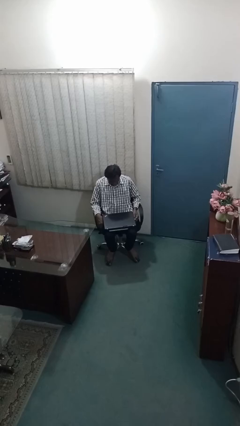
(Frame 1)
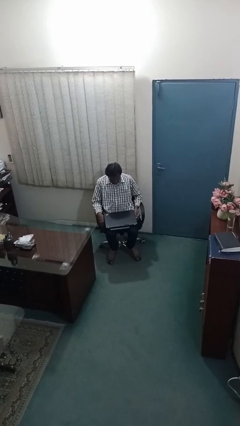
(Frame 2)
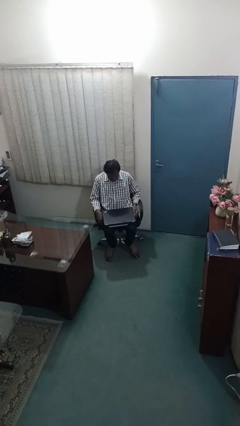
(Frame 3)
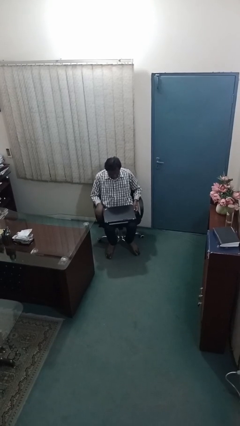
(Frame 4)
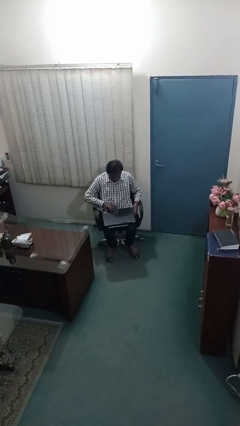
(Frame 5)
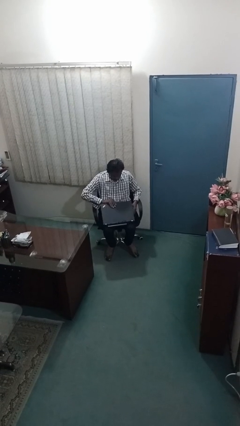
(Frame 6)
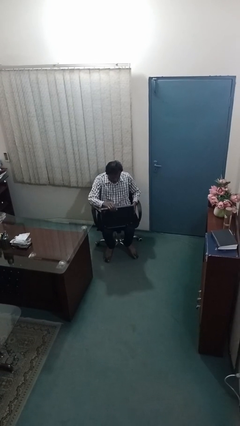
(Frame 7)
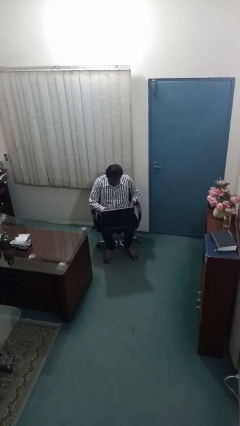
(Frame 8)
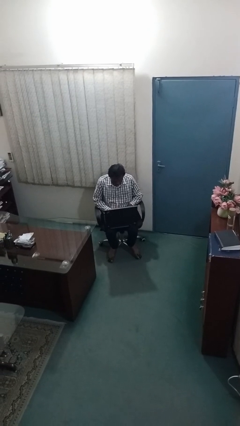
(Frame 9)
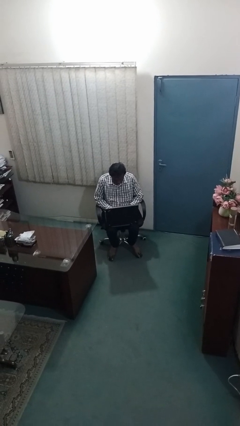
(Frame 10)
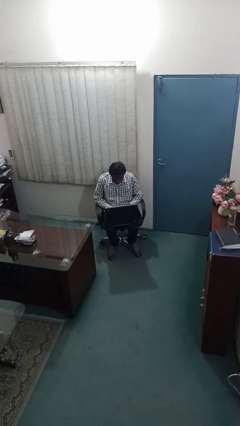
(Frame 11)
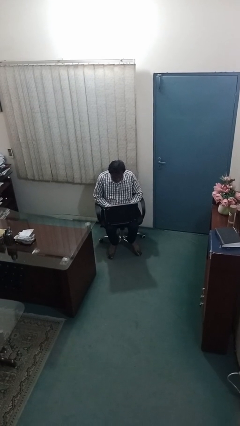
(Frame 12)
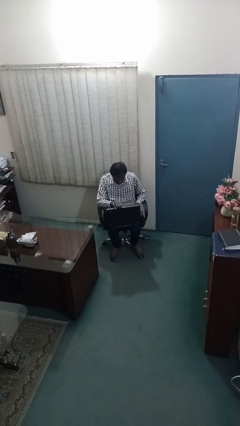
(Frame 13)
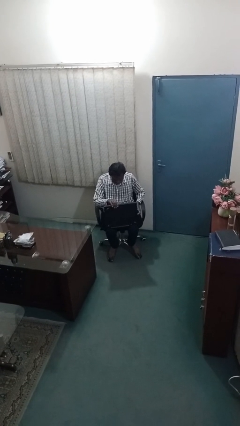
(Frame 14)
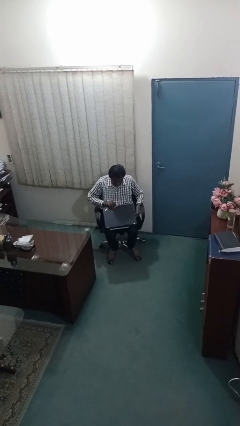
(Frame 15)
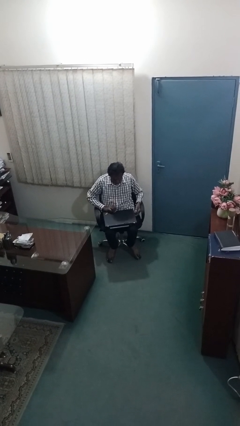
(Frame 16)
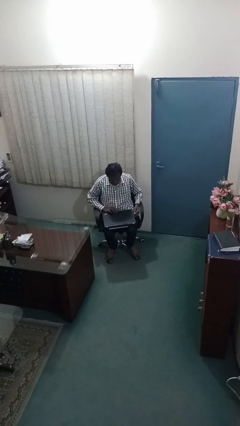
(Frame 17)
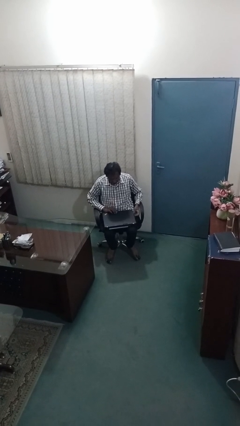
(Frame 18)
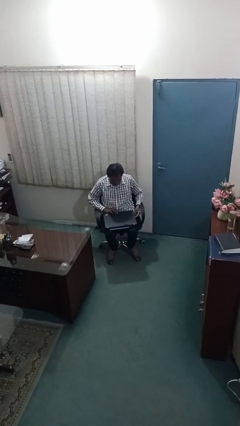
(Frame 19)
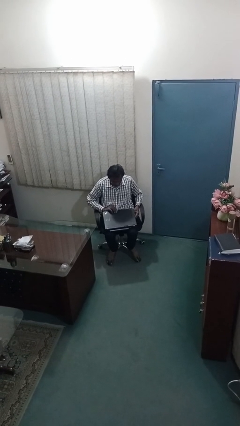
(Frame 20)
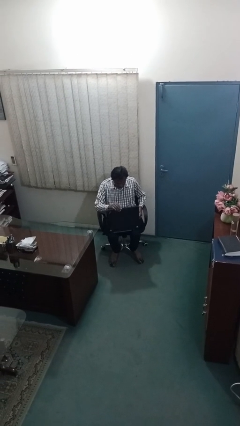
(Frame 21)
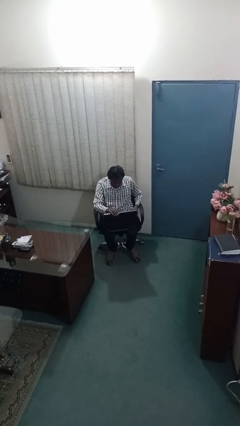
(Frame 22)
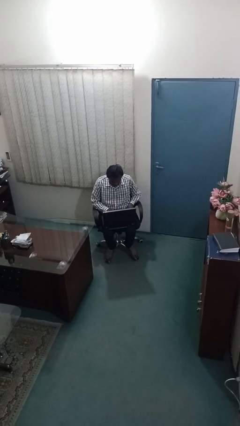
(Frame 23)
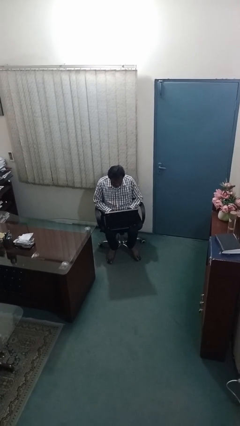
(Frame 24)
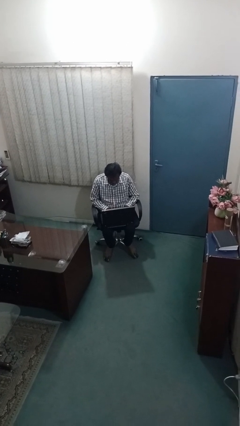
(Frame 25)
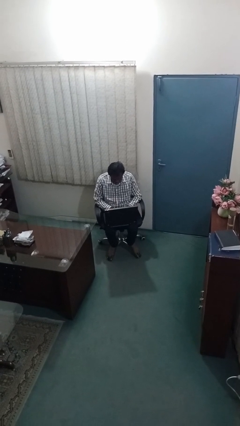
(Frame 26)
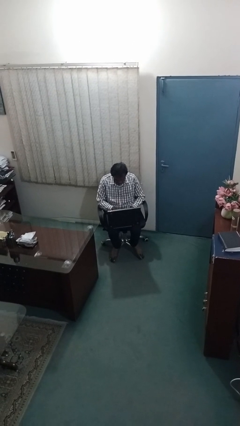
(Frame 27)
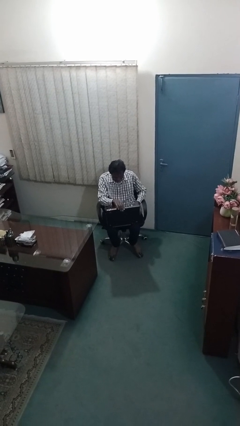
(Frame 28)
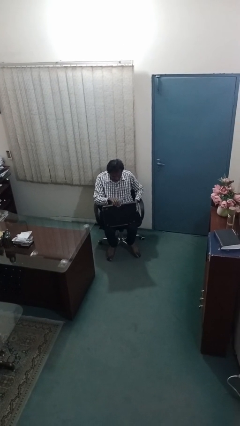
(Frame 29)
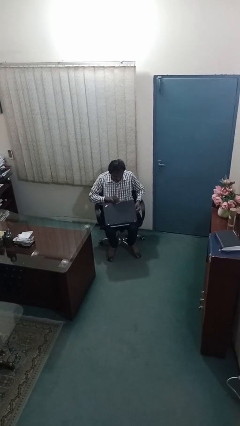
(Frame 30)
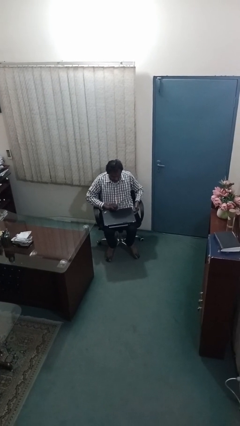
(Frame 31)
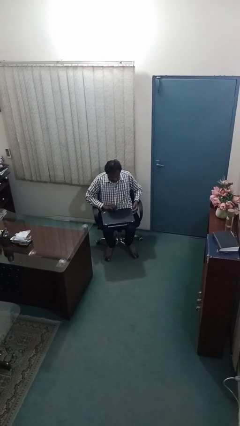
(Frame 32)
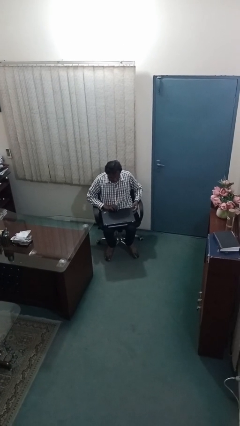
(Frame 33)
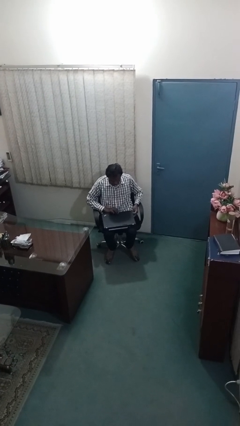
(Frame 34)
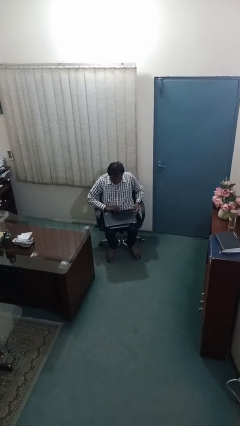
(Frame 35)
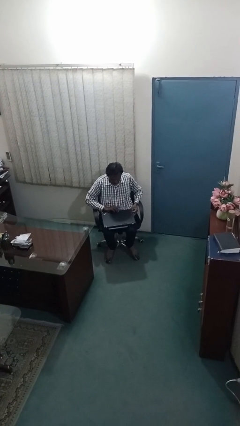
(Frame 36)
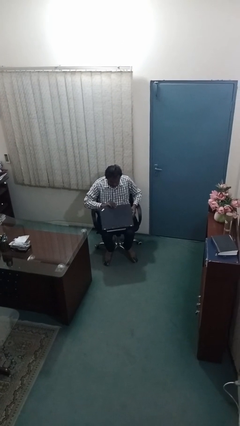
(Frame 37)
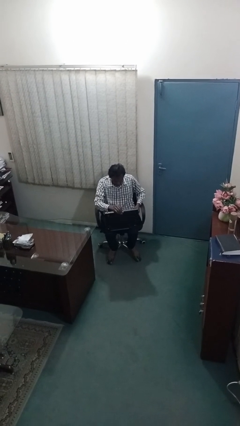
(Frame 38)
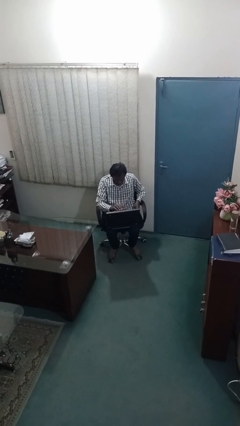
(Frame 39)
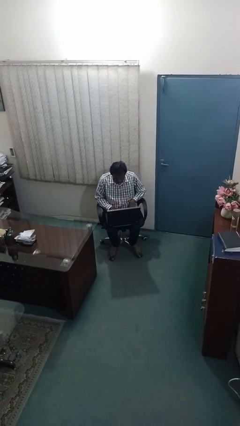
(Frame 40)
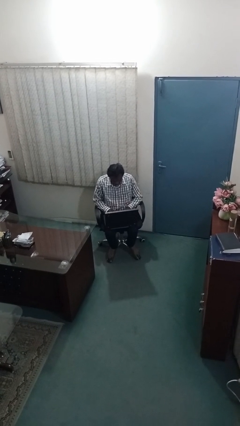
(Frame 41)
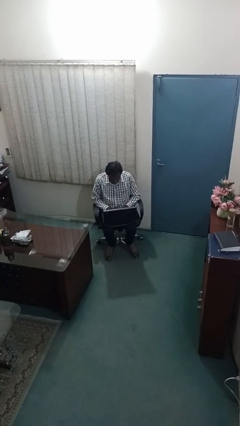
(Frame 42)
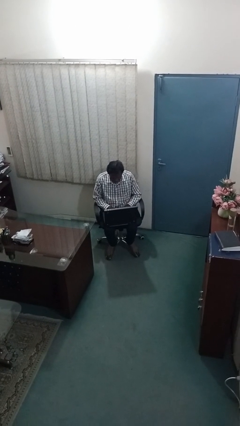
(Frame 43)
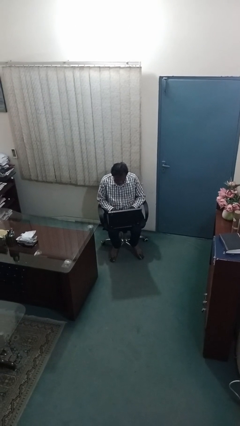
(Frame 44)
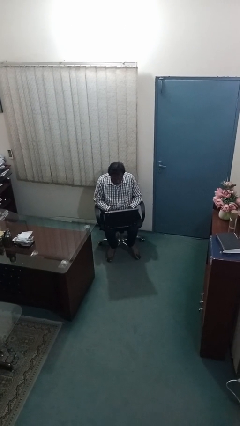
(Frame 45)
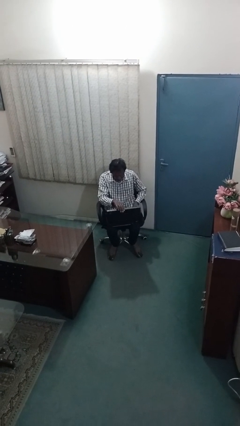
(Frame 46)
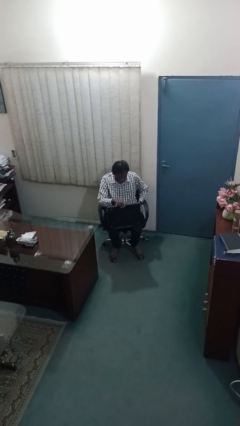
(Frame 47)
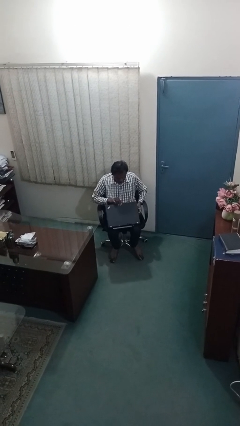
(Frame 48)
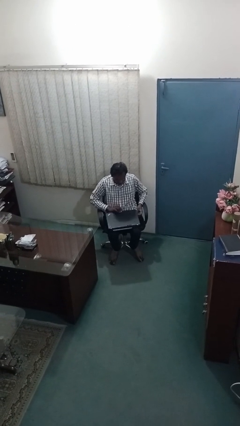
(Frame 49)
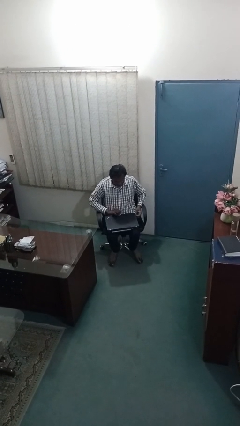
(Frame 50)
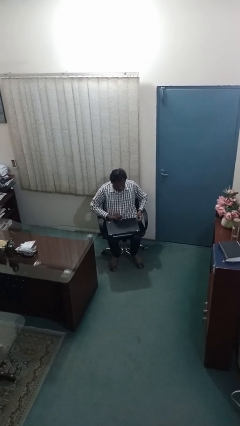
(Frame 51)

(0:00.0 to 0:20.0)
person interacts with laptop

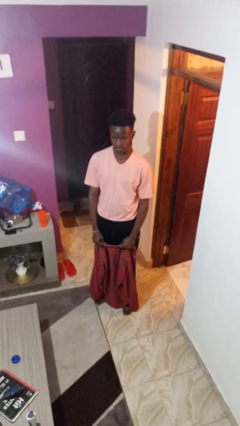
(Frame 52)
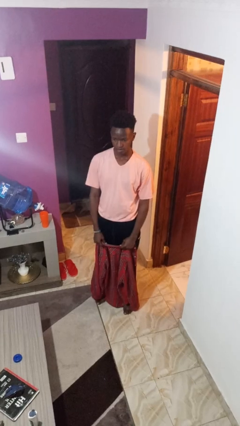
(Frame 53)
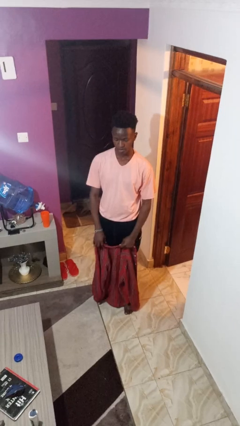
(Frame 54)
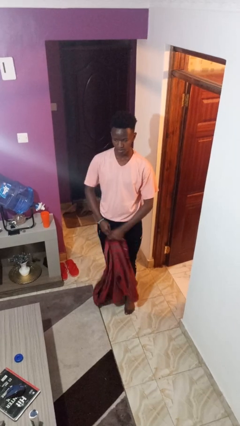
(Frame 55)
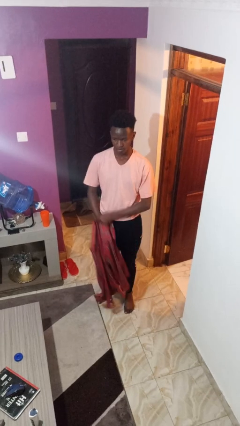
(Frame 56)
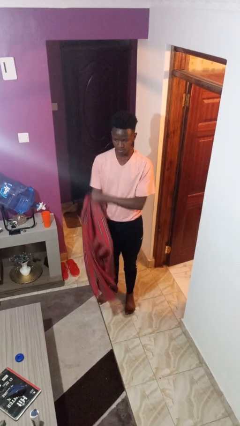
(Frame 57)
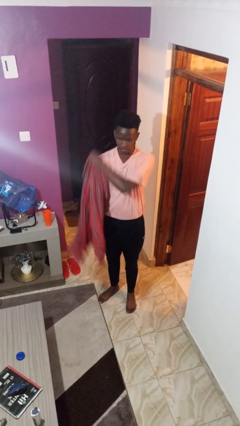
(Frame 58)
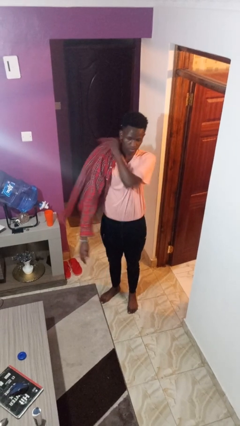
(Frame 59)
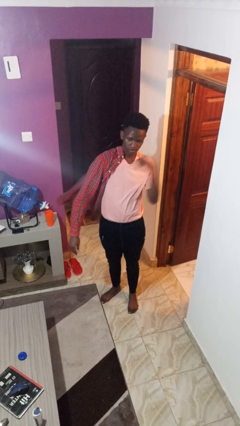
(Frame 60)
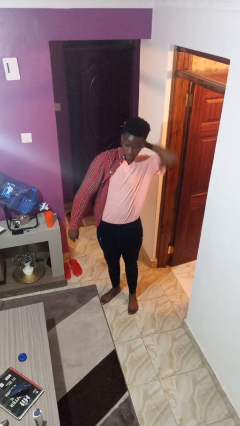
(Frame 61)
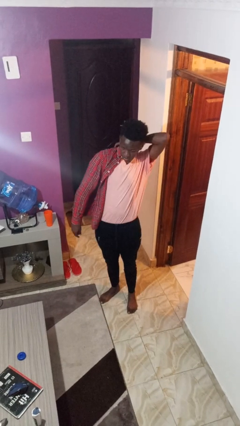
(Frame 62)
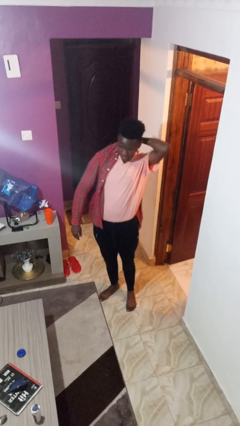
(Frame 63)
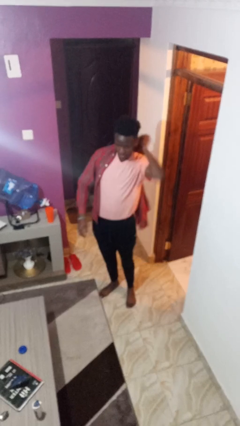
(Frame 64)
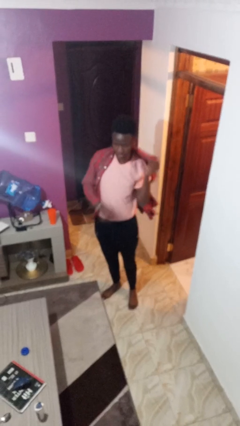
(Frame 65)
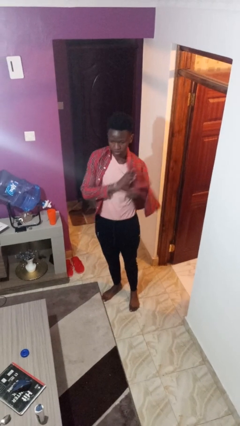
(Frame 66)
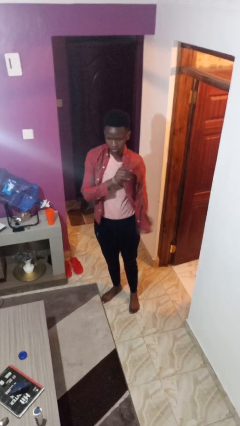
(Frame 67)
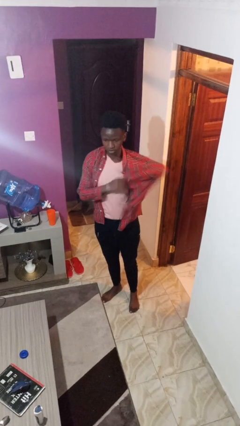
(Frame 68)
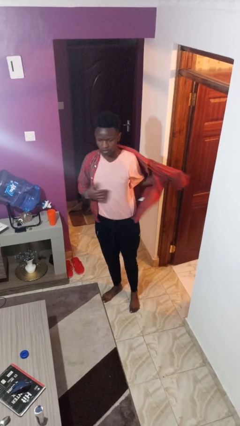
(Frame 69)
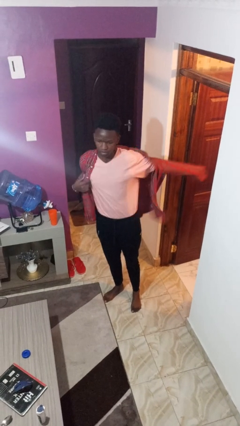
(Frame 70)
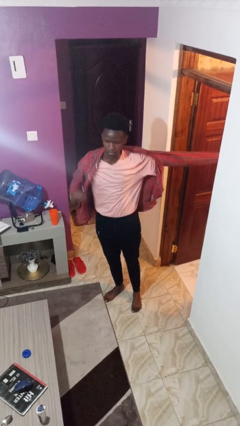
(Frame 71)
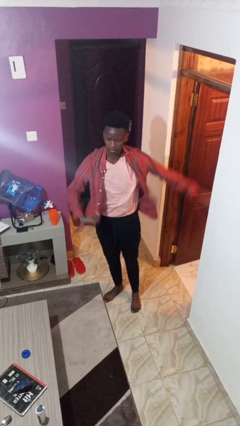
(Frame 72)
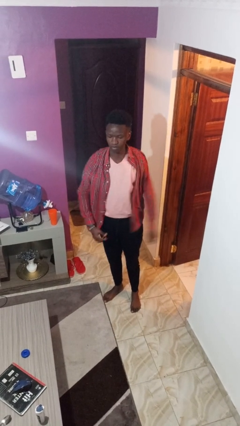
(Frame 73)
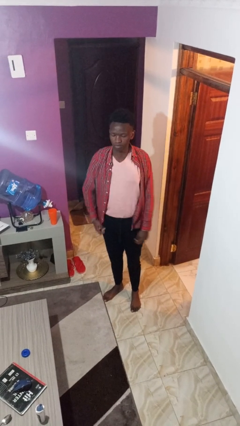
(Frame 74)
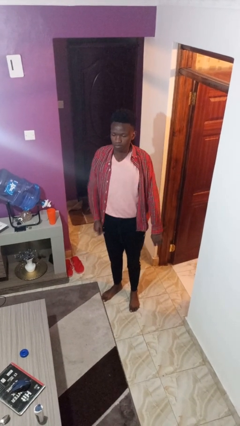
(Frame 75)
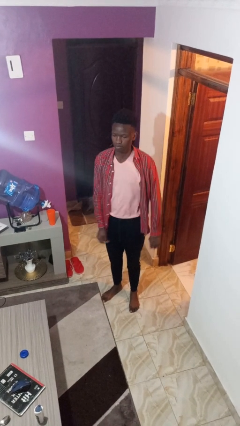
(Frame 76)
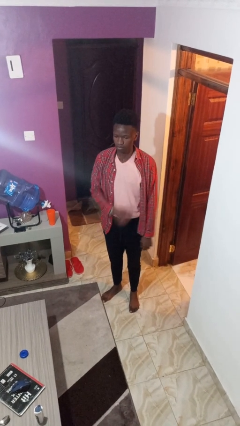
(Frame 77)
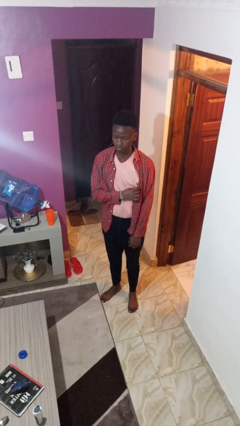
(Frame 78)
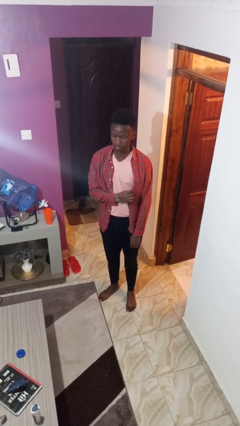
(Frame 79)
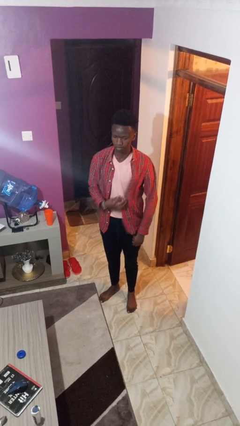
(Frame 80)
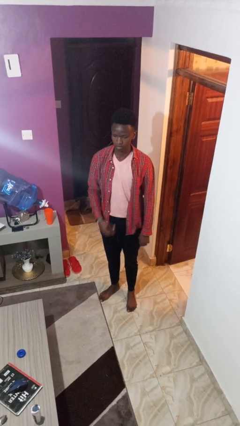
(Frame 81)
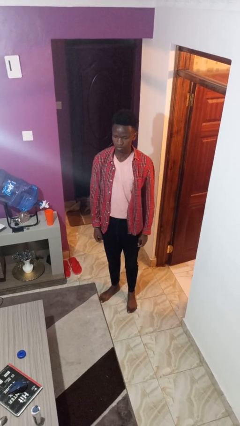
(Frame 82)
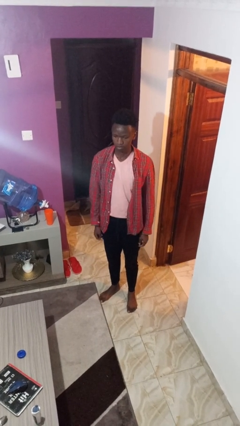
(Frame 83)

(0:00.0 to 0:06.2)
person puts on shirt

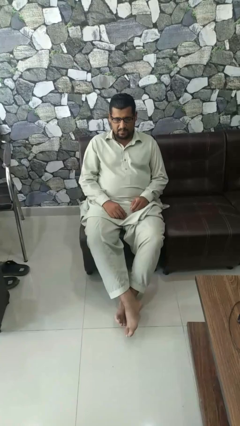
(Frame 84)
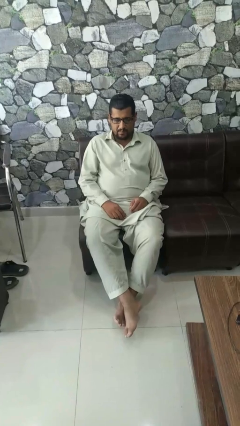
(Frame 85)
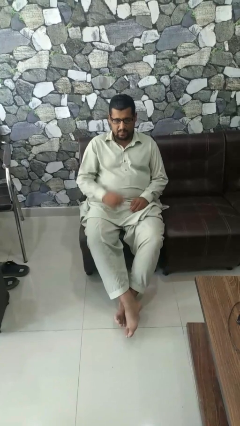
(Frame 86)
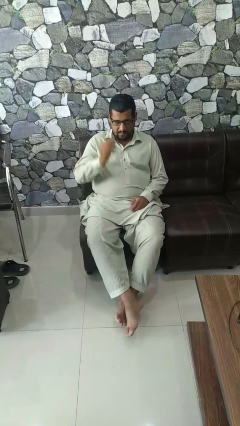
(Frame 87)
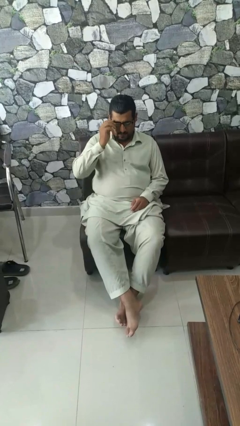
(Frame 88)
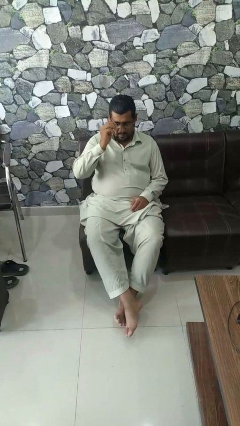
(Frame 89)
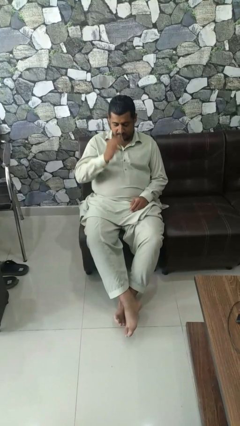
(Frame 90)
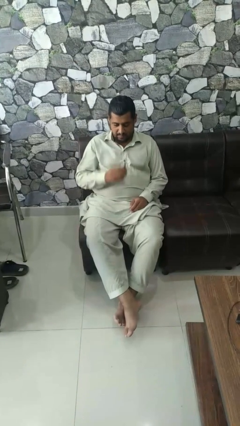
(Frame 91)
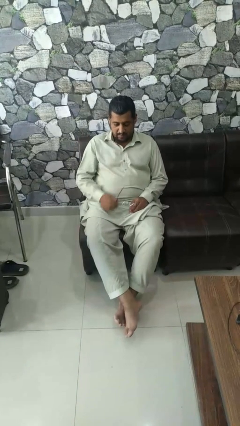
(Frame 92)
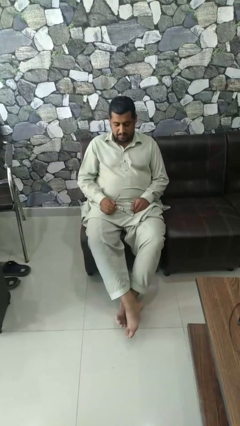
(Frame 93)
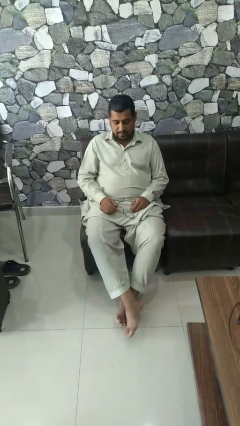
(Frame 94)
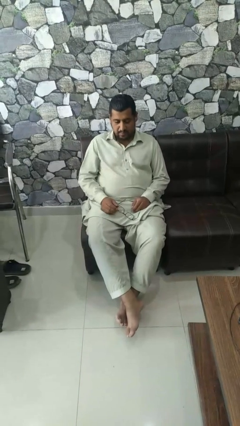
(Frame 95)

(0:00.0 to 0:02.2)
person takes off glasses
